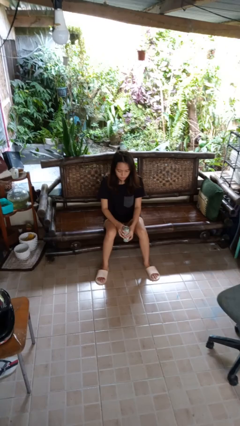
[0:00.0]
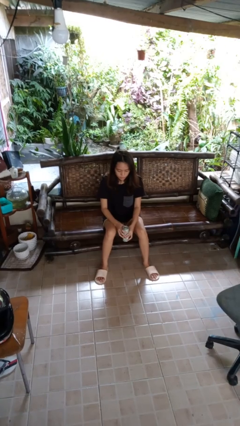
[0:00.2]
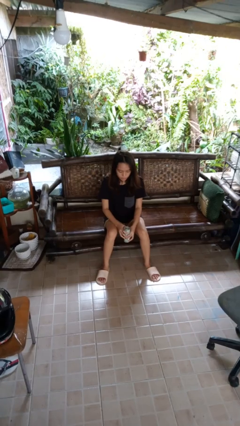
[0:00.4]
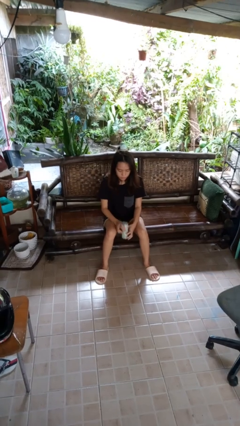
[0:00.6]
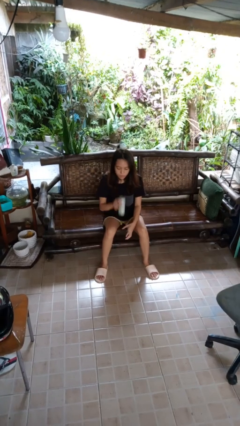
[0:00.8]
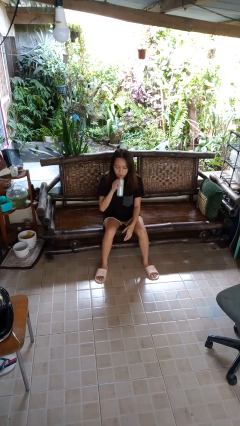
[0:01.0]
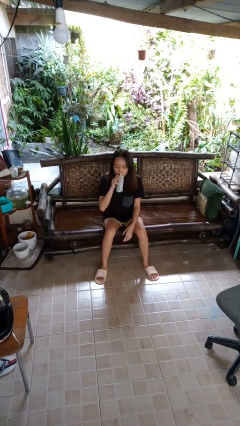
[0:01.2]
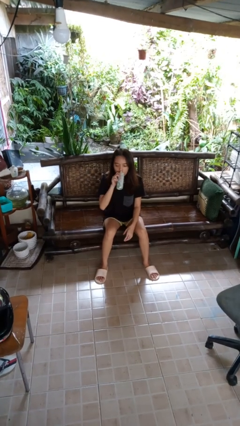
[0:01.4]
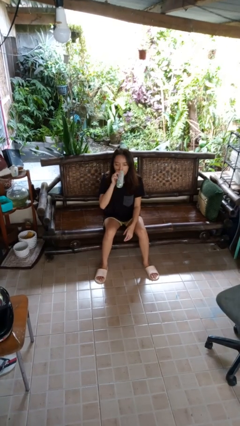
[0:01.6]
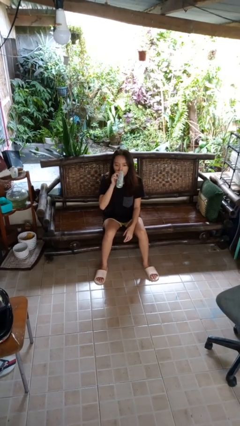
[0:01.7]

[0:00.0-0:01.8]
person drinks from beverage can

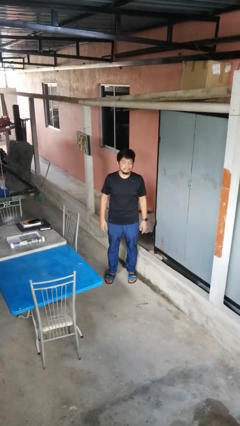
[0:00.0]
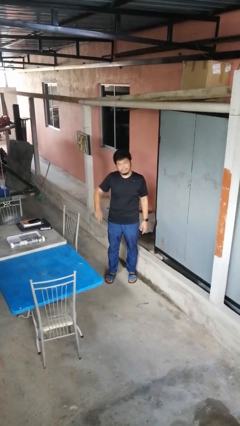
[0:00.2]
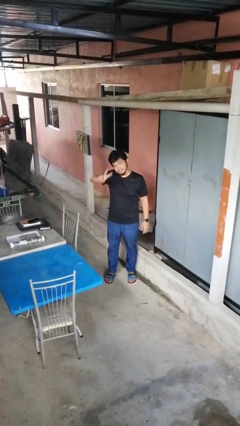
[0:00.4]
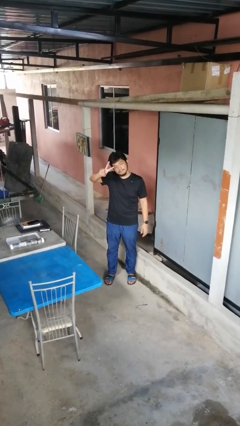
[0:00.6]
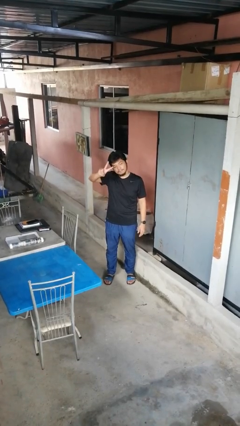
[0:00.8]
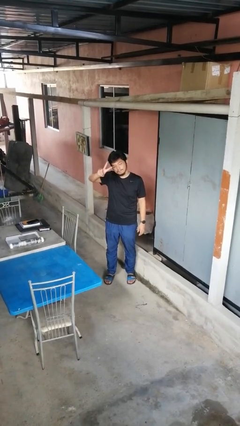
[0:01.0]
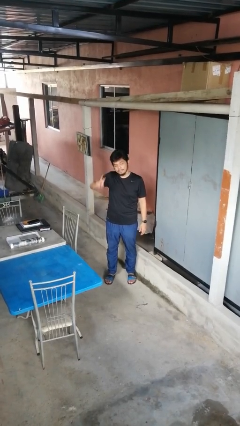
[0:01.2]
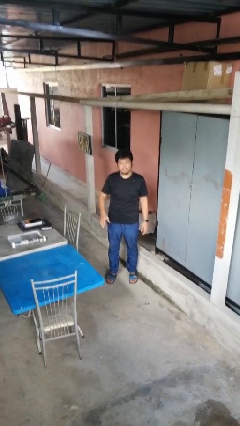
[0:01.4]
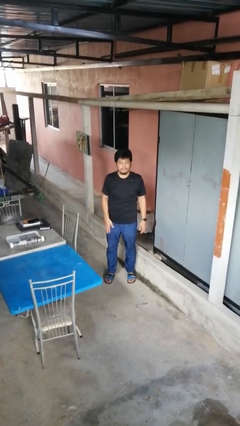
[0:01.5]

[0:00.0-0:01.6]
person gestures peace

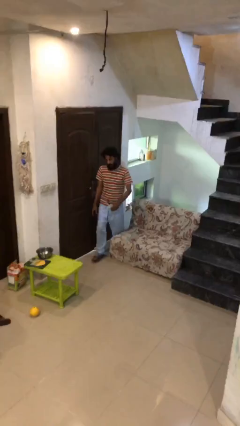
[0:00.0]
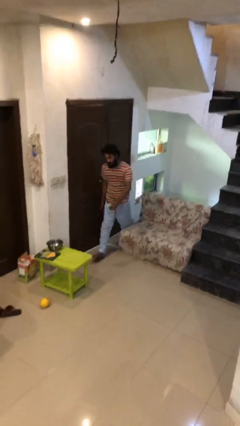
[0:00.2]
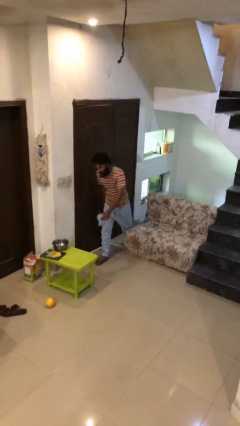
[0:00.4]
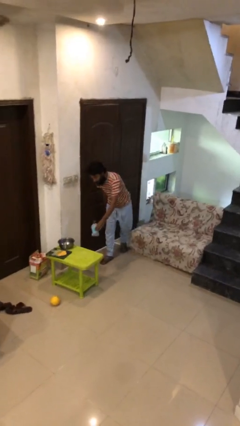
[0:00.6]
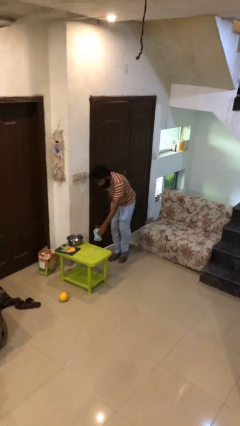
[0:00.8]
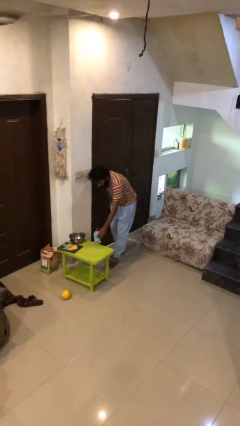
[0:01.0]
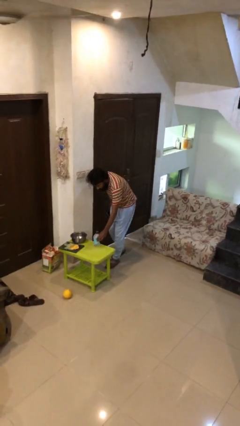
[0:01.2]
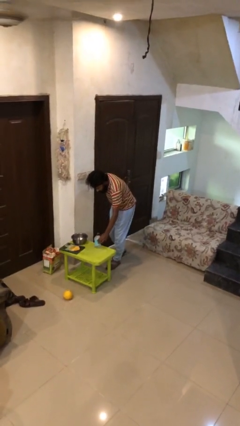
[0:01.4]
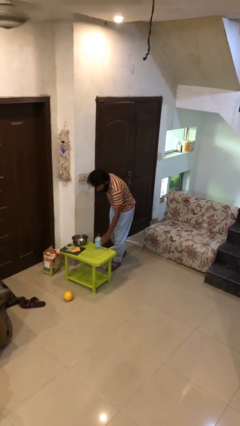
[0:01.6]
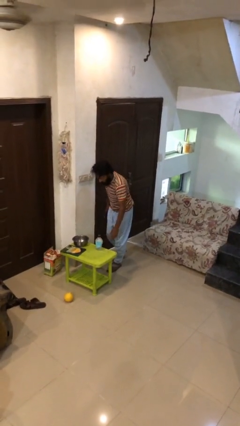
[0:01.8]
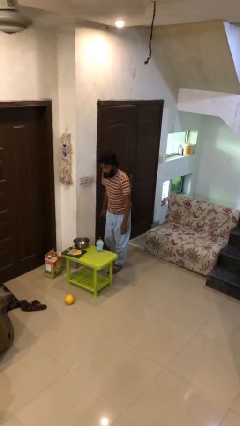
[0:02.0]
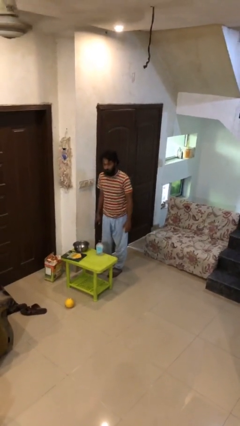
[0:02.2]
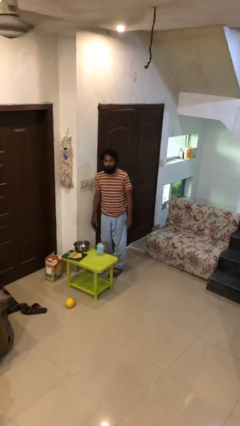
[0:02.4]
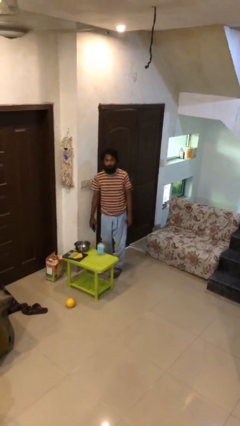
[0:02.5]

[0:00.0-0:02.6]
person puts down object on table

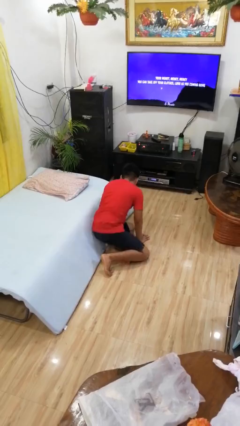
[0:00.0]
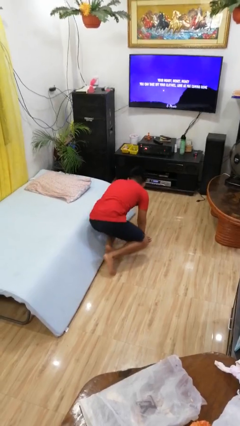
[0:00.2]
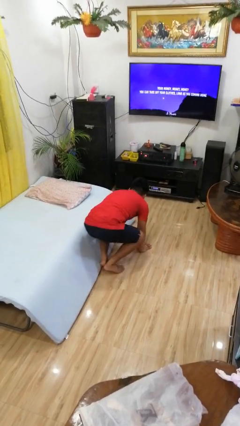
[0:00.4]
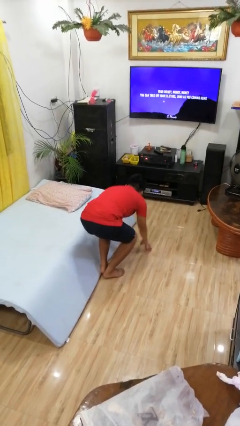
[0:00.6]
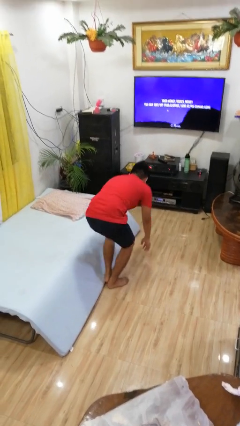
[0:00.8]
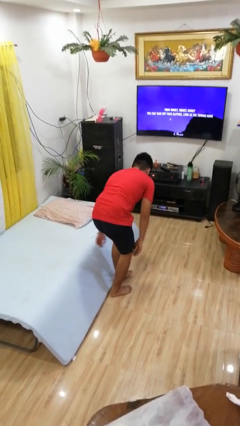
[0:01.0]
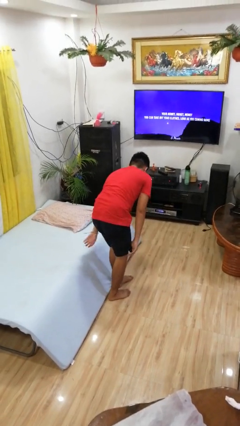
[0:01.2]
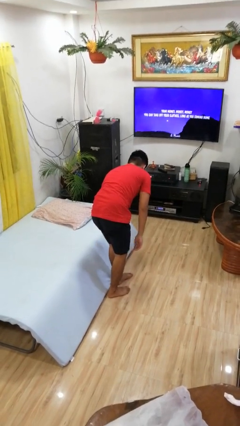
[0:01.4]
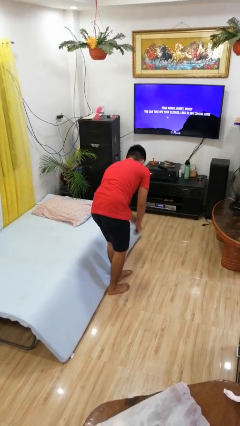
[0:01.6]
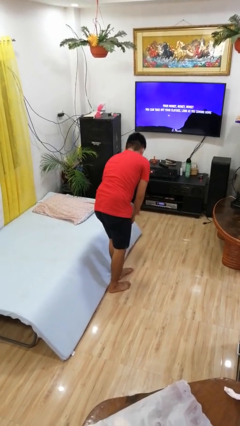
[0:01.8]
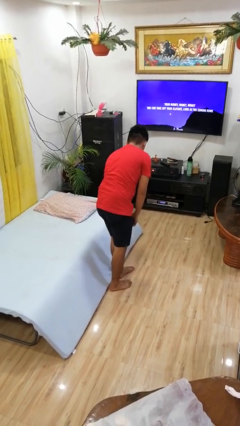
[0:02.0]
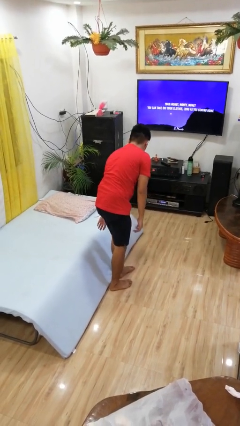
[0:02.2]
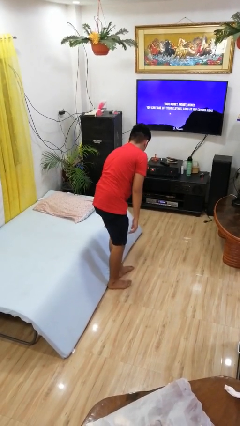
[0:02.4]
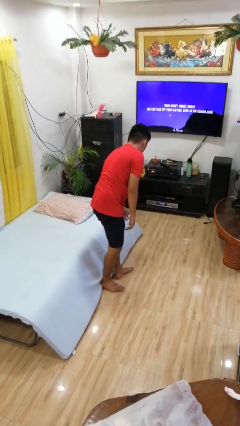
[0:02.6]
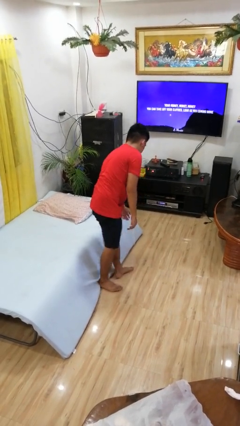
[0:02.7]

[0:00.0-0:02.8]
person stands up from floor

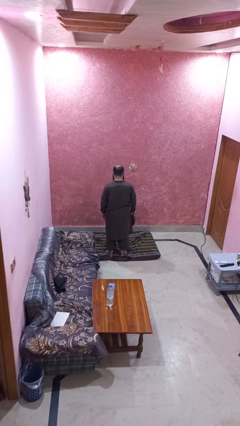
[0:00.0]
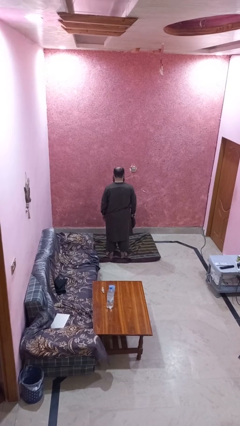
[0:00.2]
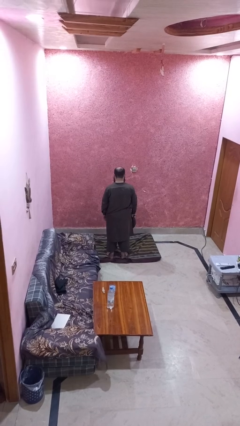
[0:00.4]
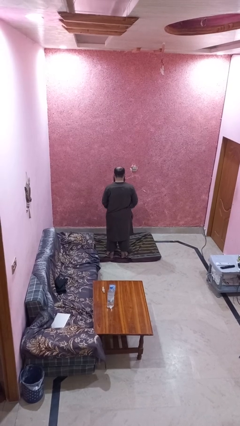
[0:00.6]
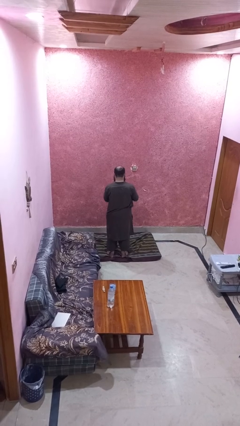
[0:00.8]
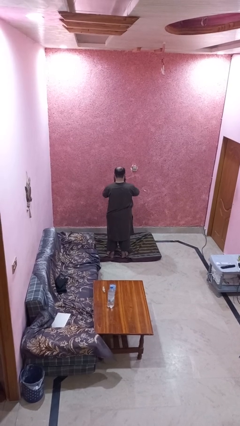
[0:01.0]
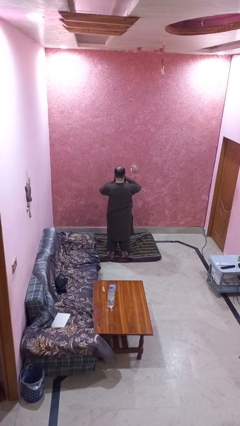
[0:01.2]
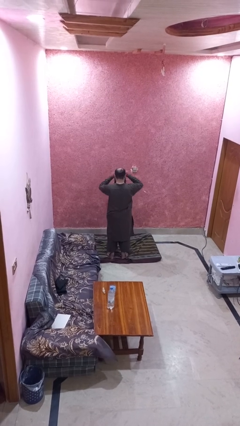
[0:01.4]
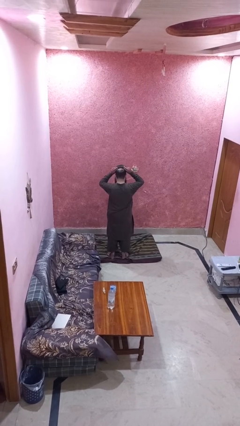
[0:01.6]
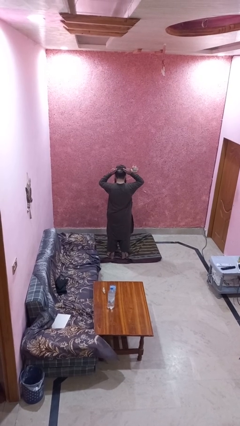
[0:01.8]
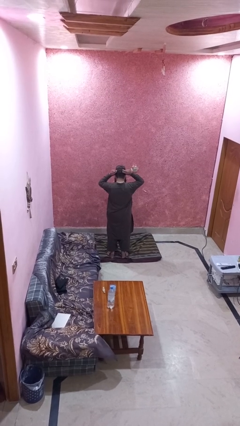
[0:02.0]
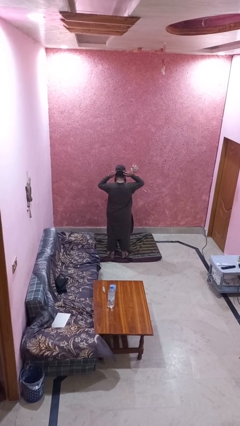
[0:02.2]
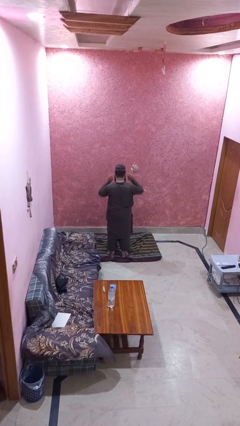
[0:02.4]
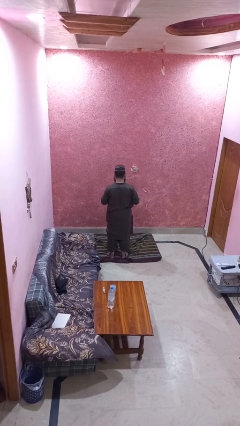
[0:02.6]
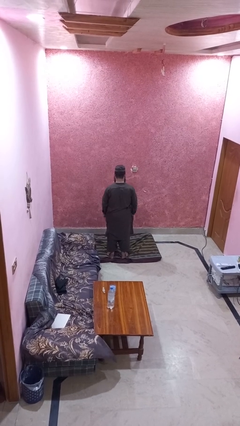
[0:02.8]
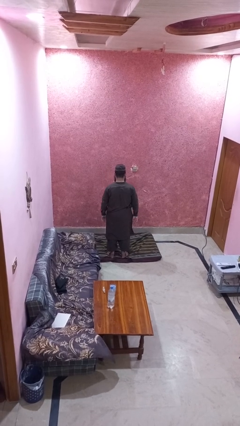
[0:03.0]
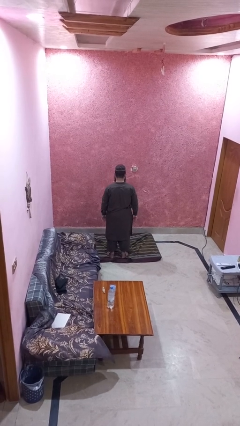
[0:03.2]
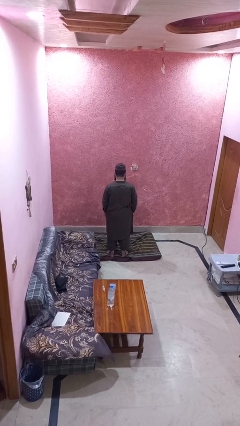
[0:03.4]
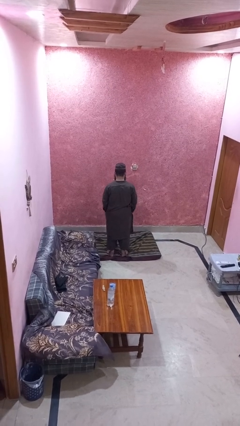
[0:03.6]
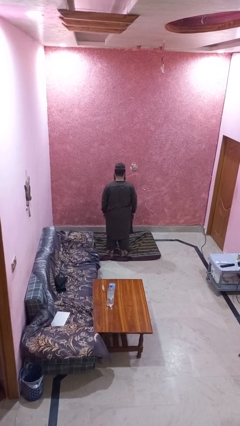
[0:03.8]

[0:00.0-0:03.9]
person puts on hat

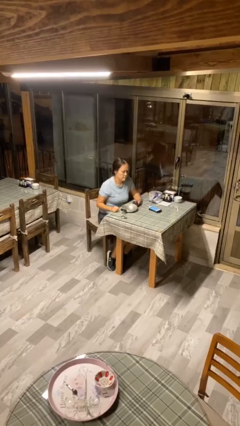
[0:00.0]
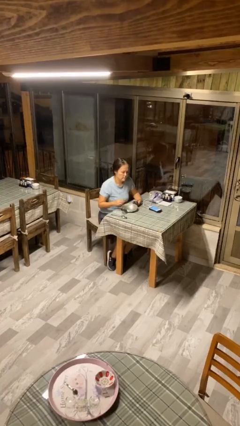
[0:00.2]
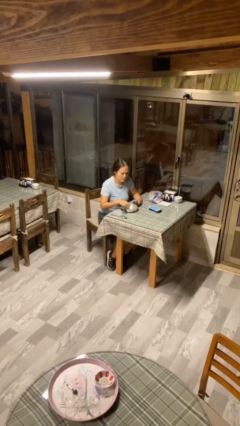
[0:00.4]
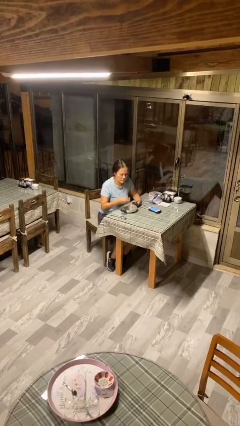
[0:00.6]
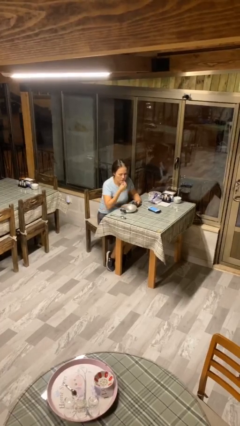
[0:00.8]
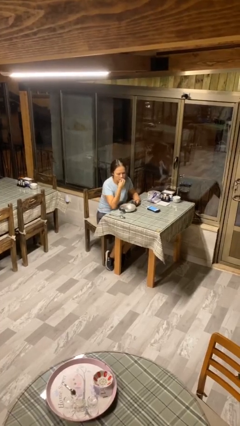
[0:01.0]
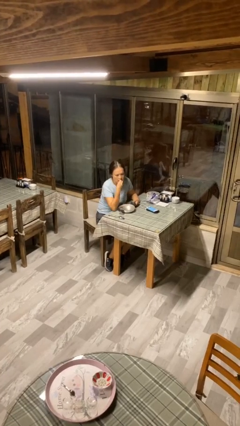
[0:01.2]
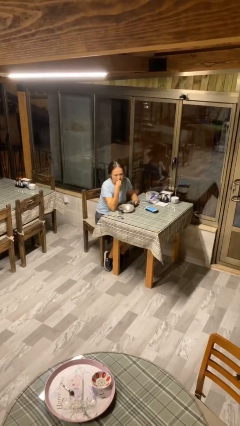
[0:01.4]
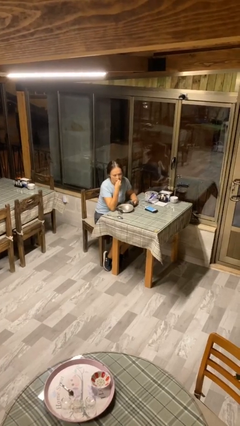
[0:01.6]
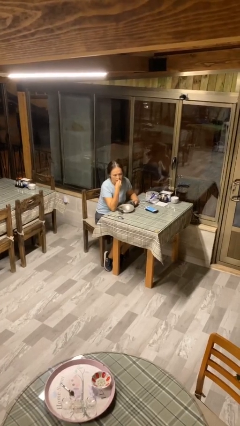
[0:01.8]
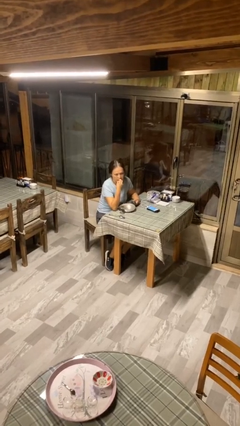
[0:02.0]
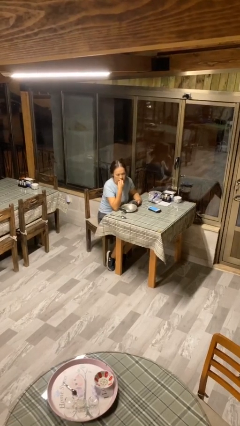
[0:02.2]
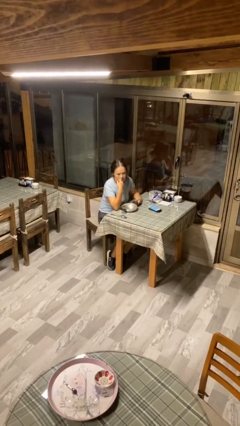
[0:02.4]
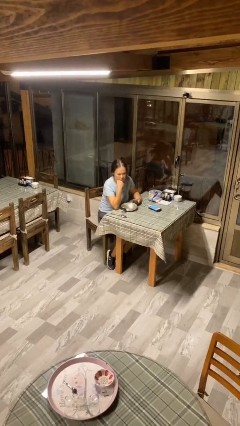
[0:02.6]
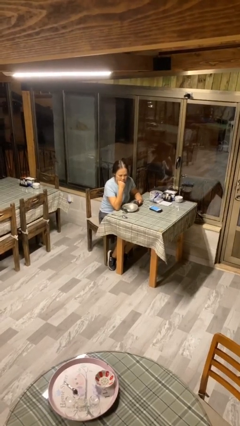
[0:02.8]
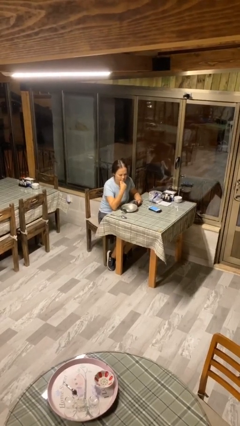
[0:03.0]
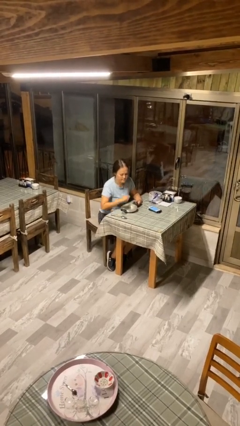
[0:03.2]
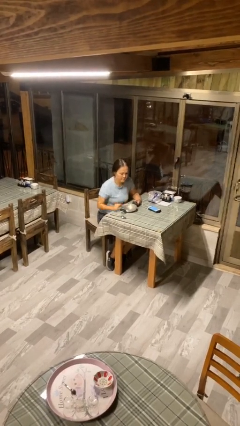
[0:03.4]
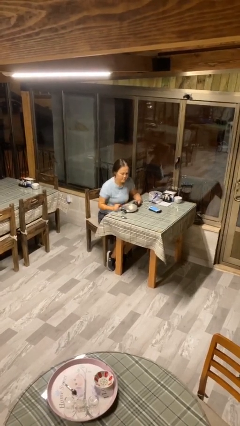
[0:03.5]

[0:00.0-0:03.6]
person eats with hands

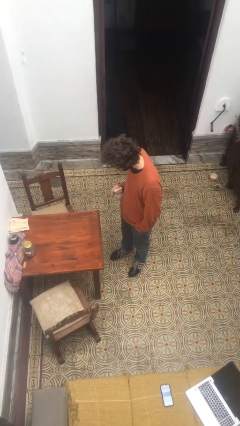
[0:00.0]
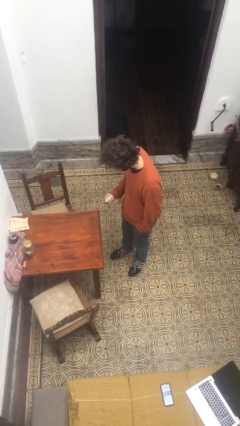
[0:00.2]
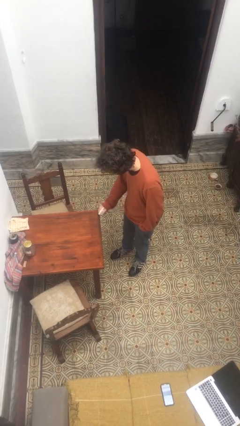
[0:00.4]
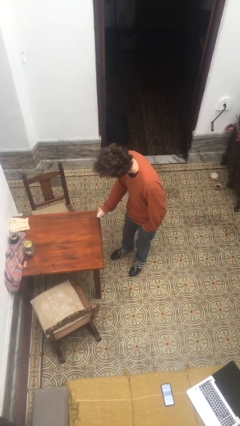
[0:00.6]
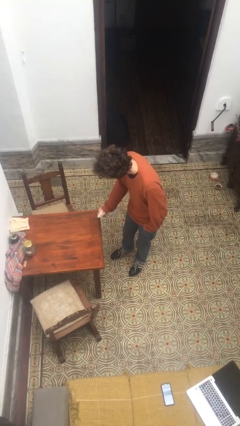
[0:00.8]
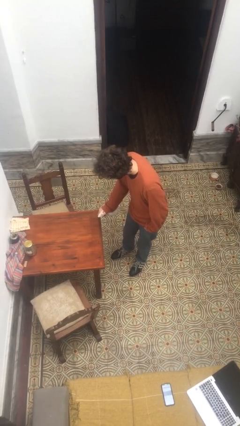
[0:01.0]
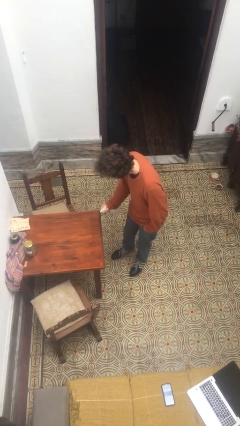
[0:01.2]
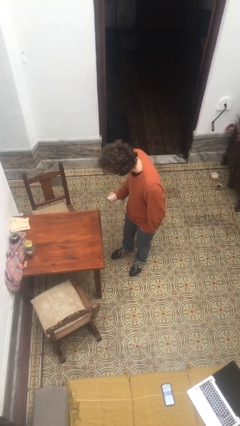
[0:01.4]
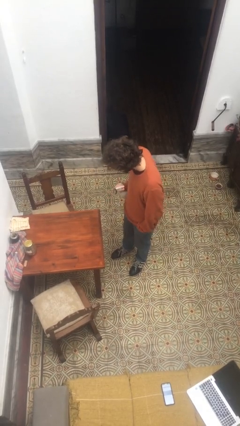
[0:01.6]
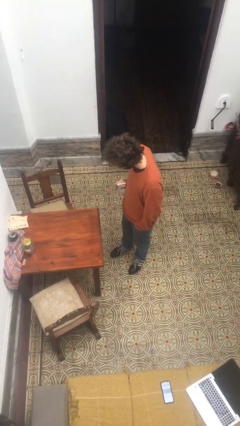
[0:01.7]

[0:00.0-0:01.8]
person sprays from bottle
